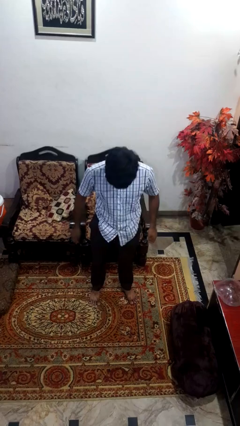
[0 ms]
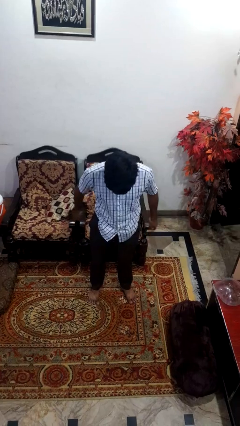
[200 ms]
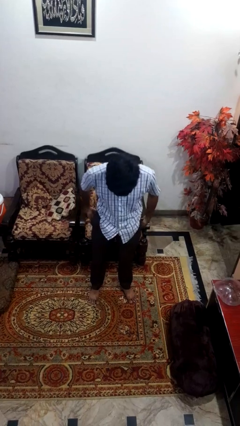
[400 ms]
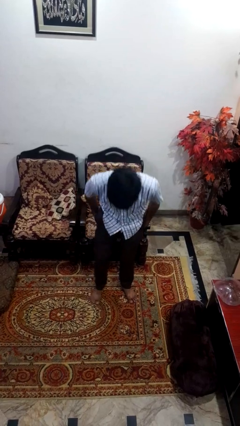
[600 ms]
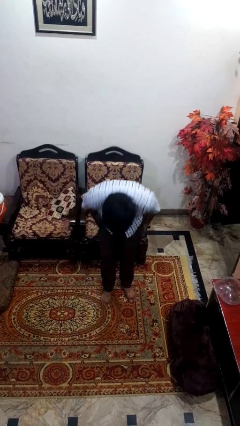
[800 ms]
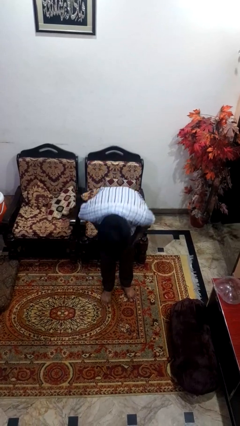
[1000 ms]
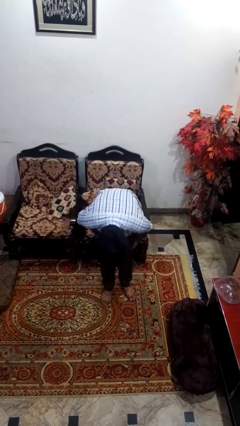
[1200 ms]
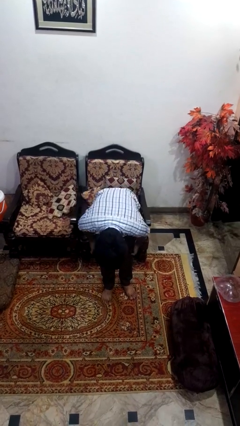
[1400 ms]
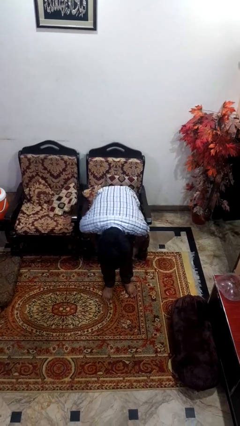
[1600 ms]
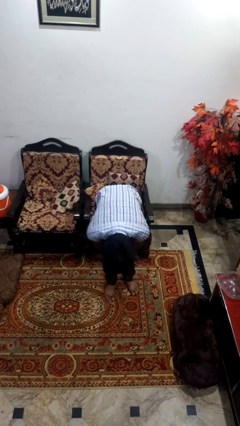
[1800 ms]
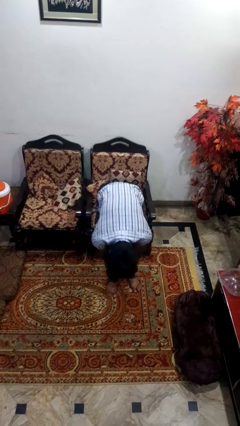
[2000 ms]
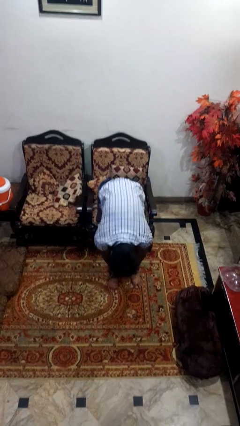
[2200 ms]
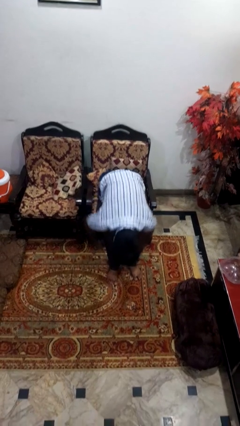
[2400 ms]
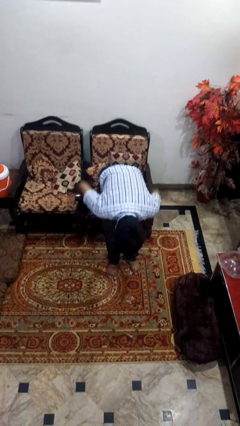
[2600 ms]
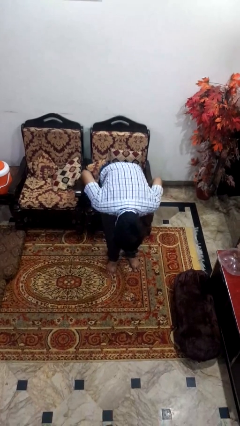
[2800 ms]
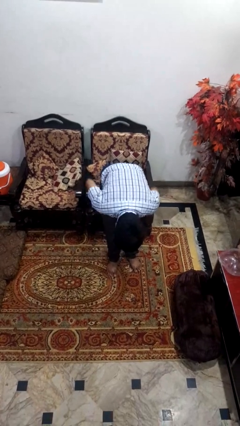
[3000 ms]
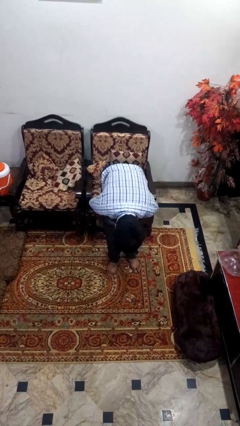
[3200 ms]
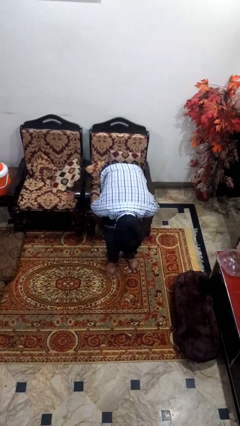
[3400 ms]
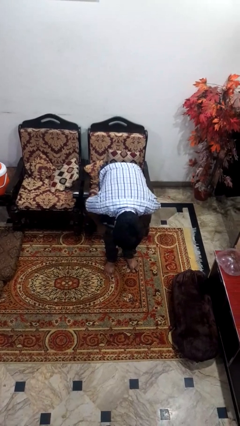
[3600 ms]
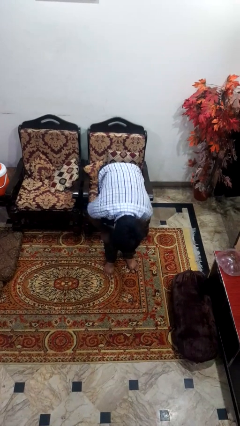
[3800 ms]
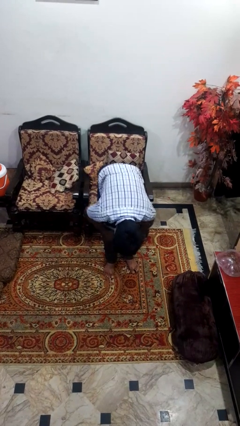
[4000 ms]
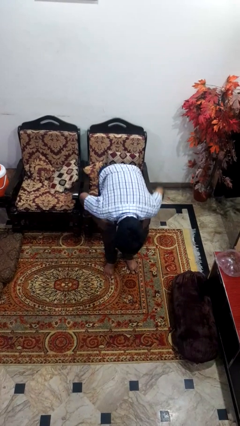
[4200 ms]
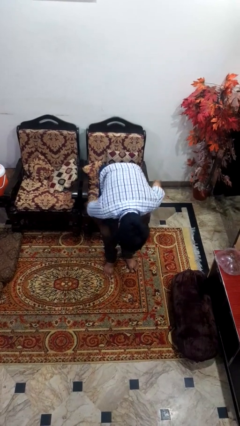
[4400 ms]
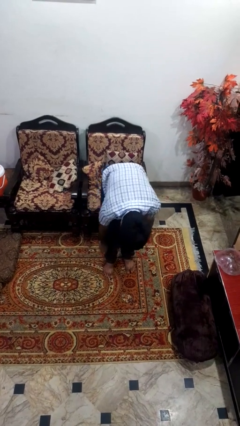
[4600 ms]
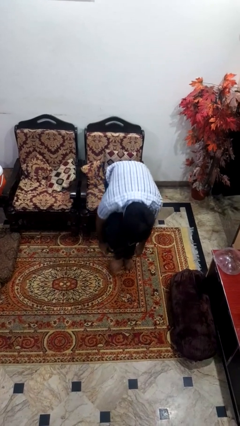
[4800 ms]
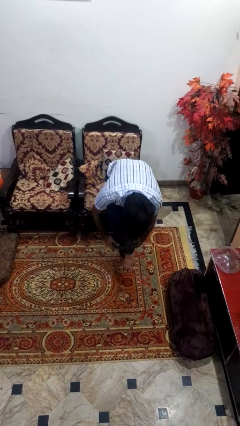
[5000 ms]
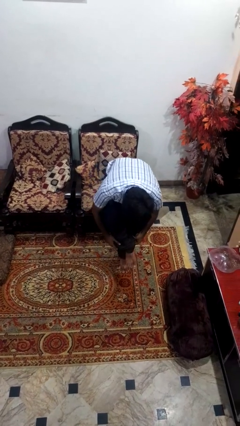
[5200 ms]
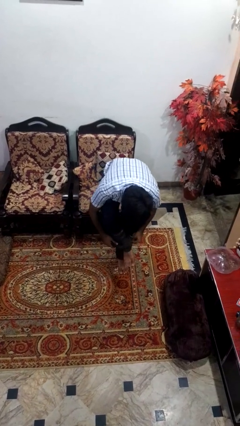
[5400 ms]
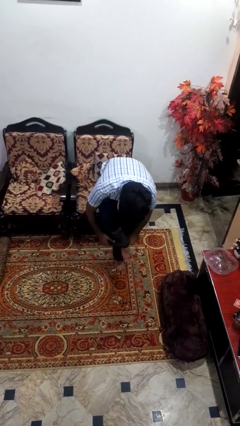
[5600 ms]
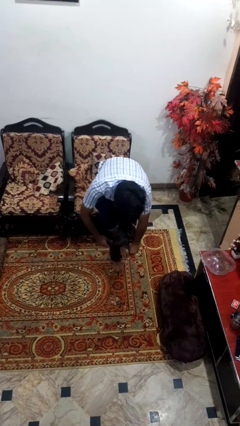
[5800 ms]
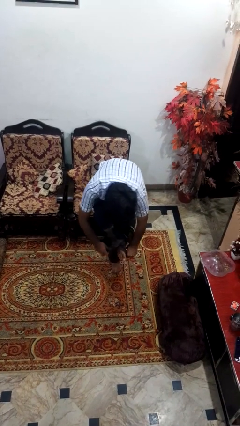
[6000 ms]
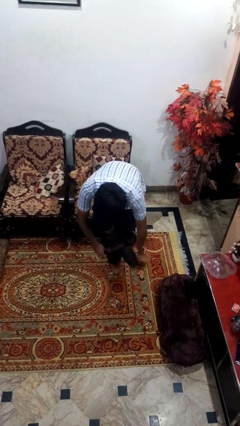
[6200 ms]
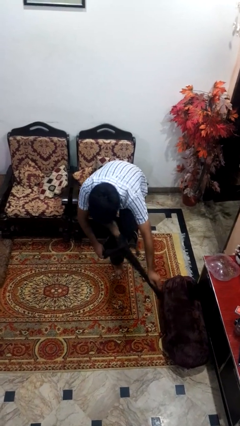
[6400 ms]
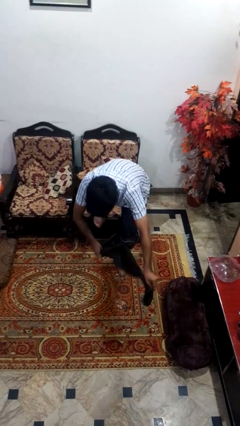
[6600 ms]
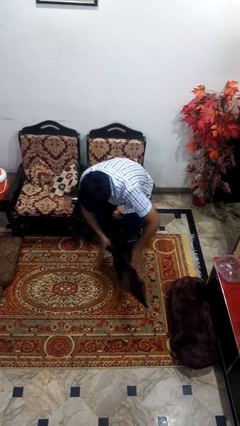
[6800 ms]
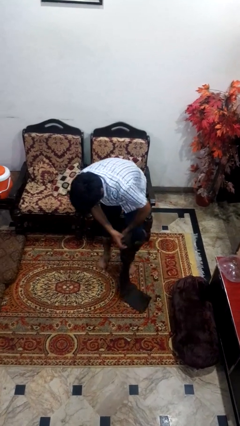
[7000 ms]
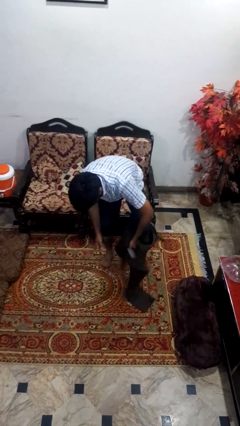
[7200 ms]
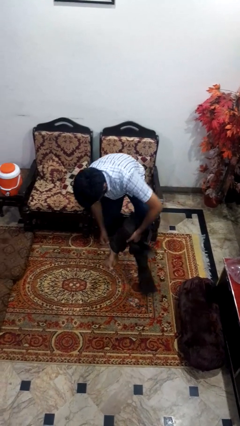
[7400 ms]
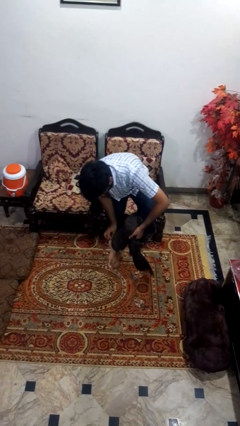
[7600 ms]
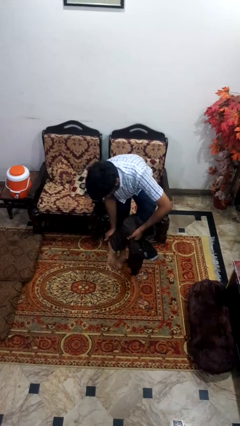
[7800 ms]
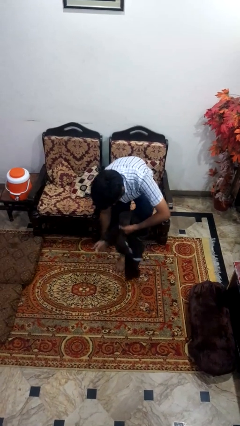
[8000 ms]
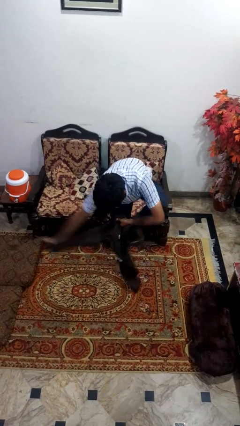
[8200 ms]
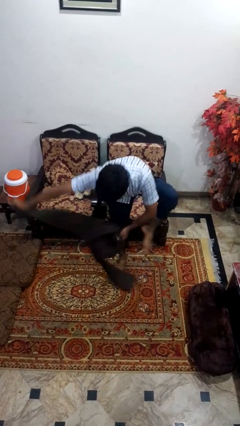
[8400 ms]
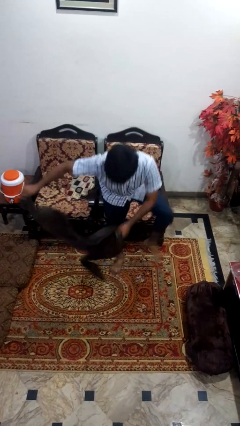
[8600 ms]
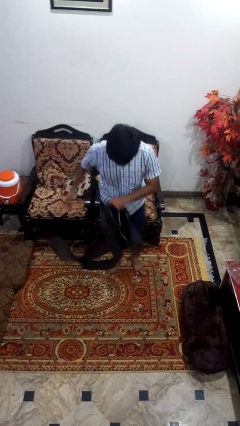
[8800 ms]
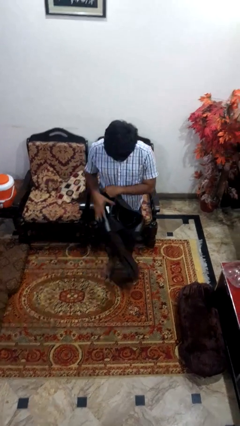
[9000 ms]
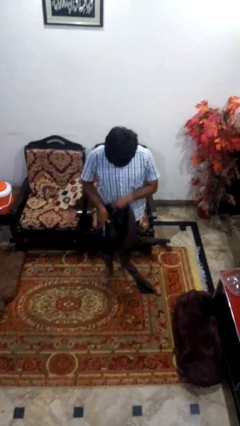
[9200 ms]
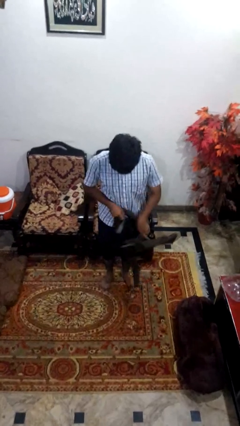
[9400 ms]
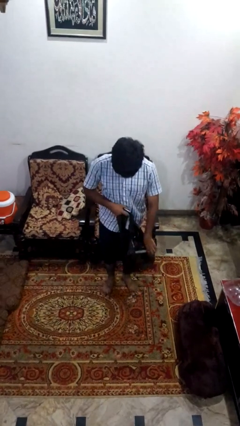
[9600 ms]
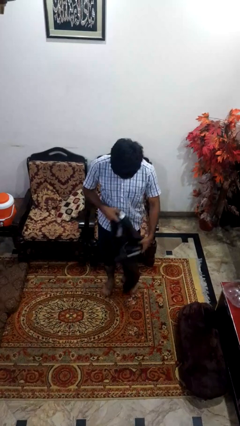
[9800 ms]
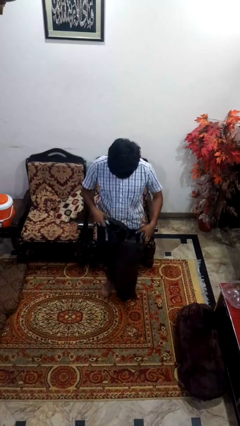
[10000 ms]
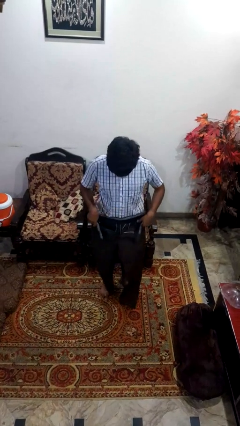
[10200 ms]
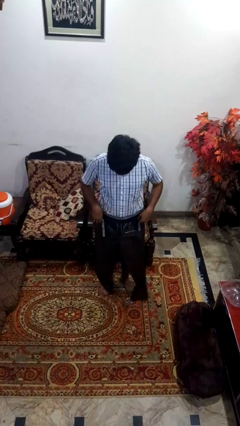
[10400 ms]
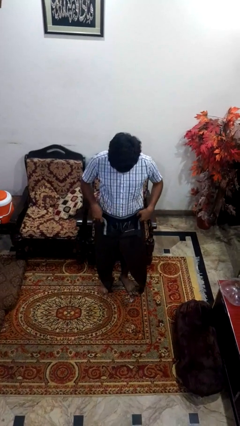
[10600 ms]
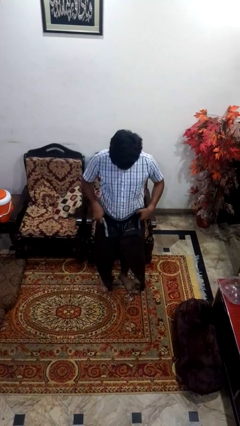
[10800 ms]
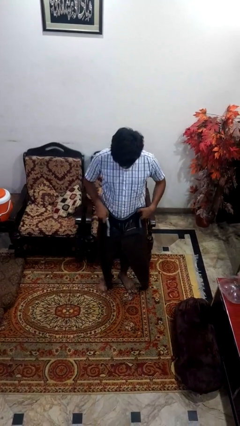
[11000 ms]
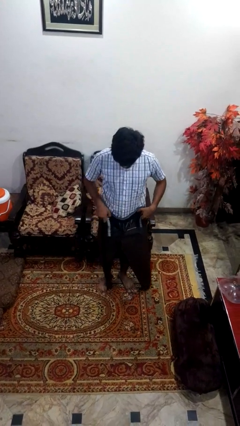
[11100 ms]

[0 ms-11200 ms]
person takes off pants

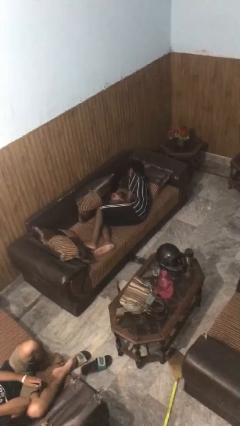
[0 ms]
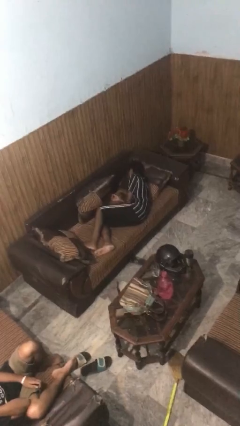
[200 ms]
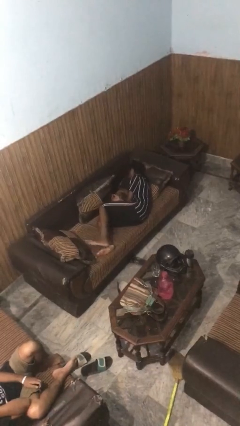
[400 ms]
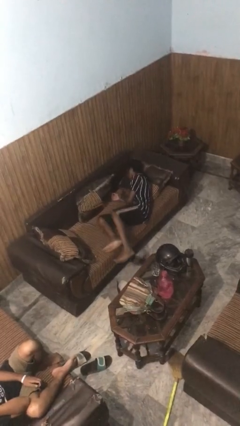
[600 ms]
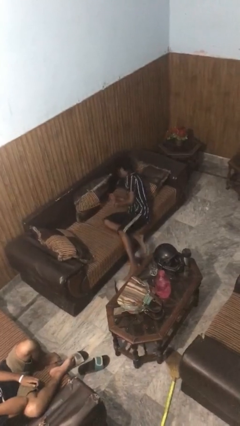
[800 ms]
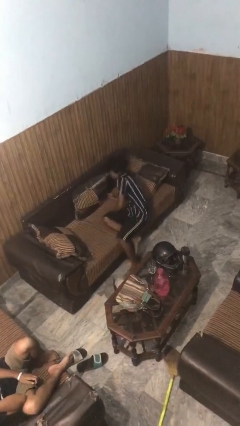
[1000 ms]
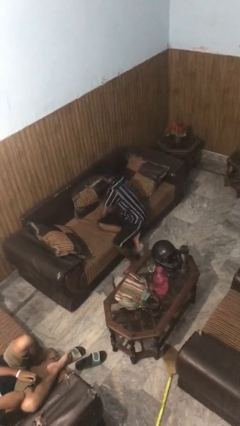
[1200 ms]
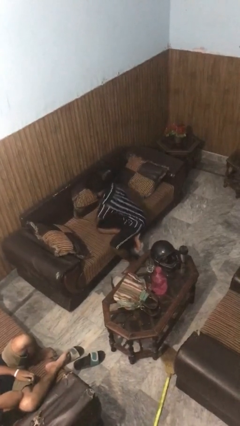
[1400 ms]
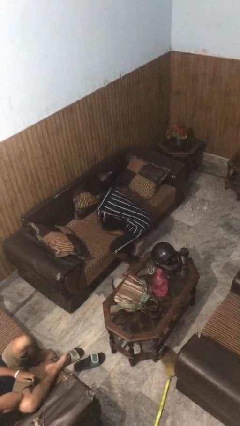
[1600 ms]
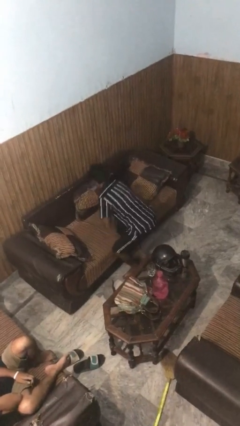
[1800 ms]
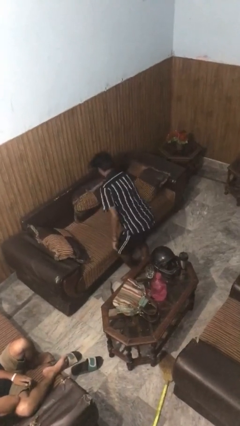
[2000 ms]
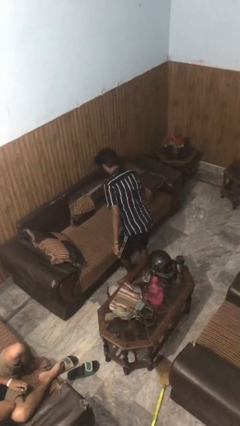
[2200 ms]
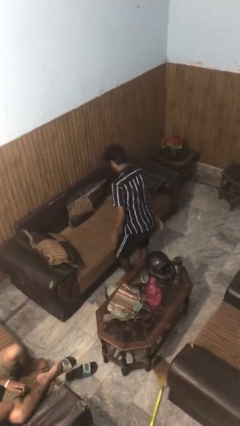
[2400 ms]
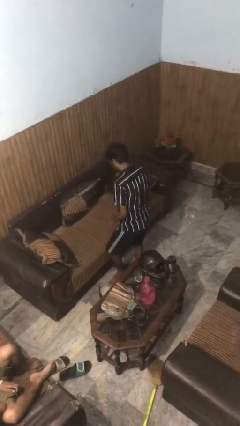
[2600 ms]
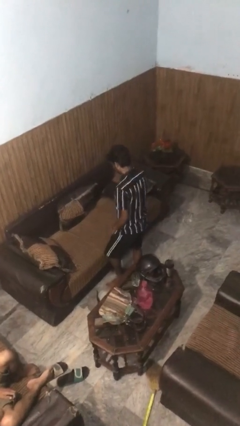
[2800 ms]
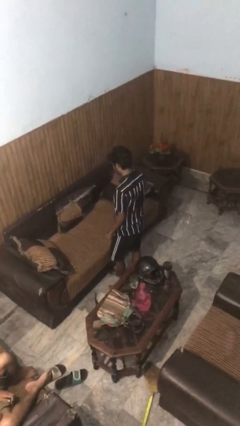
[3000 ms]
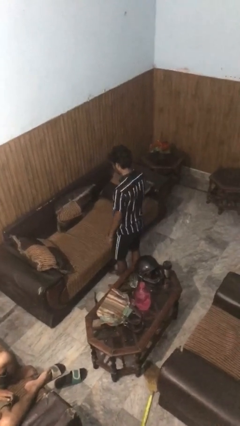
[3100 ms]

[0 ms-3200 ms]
person stands up

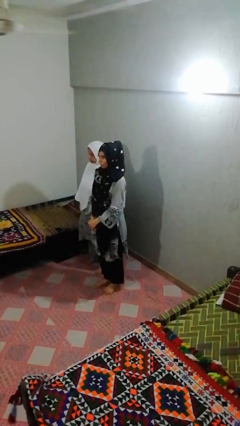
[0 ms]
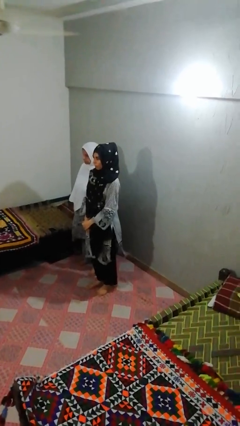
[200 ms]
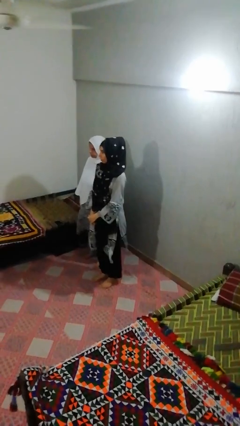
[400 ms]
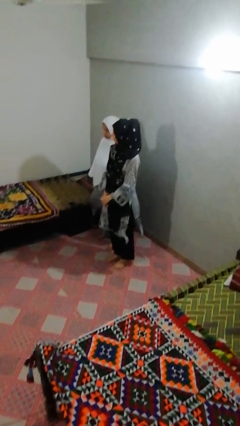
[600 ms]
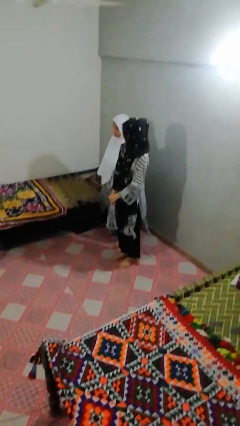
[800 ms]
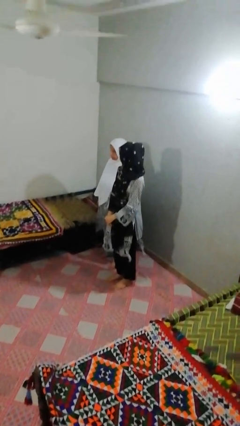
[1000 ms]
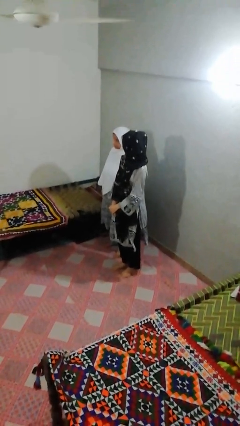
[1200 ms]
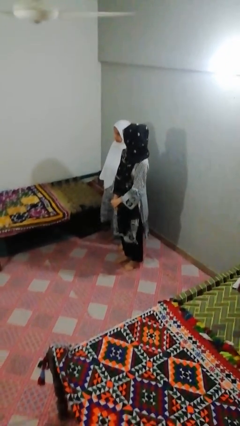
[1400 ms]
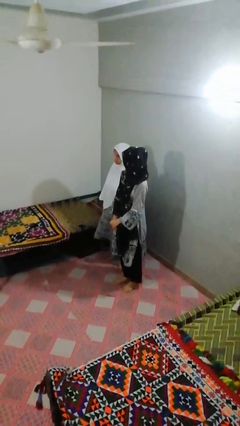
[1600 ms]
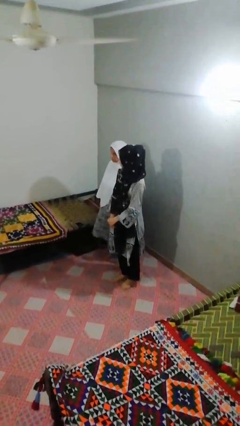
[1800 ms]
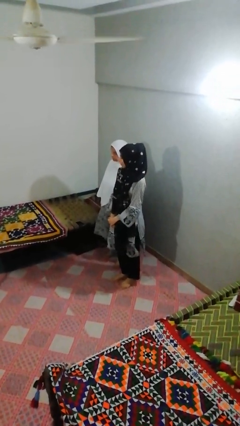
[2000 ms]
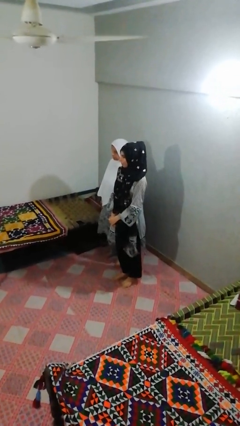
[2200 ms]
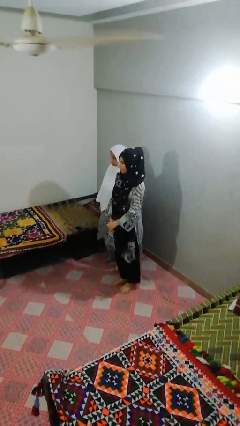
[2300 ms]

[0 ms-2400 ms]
person looks over shoulder

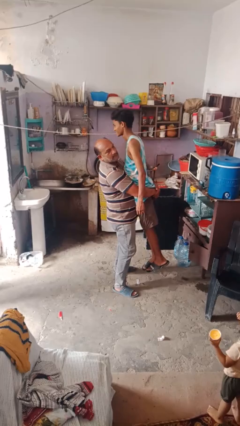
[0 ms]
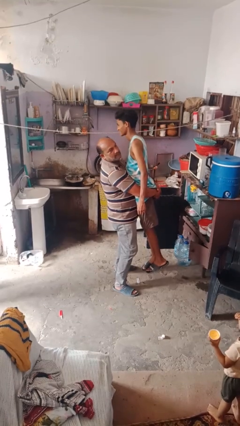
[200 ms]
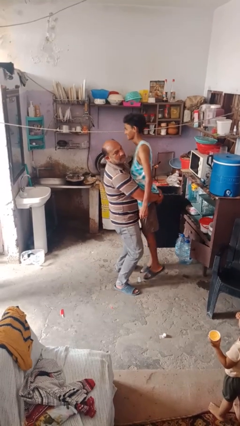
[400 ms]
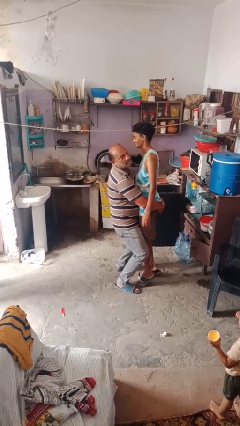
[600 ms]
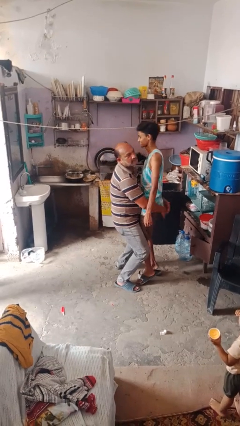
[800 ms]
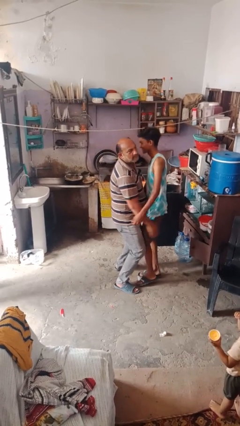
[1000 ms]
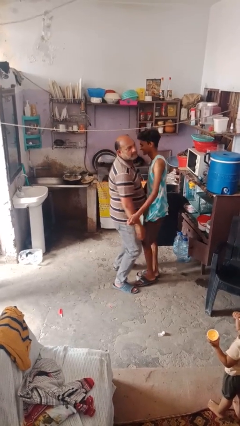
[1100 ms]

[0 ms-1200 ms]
person puts down person
